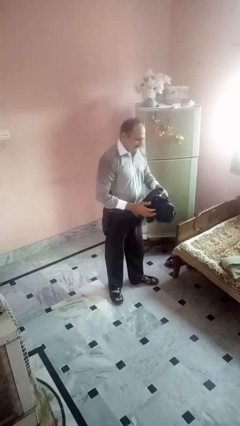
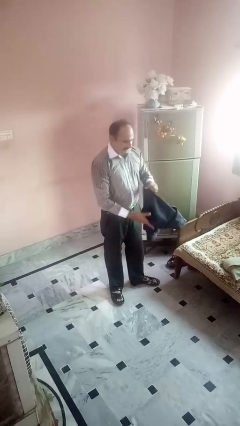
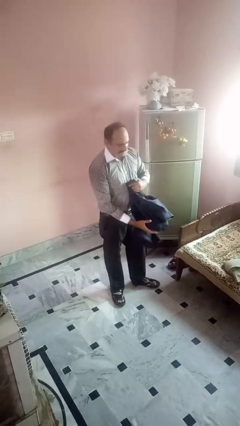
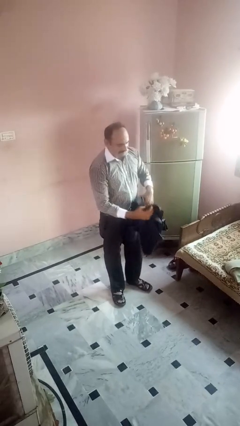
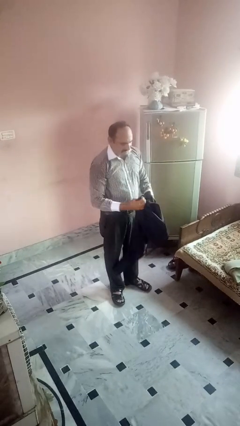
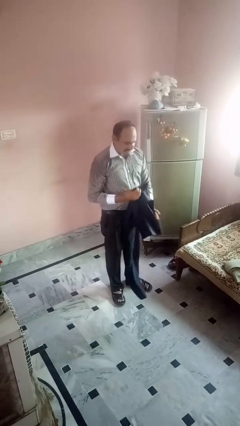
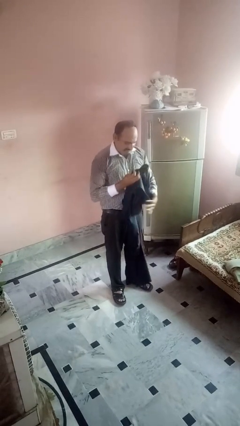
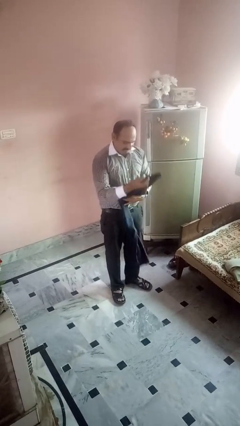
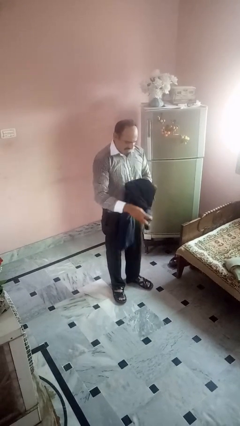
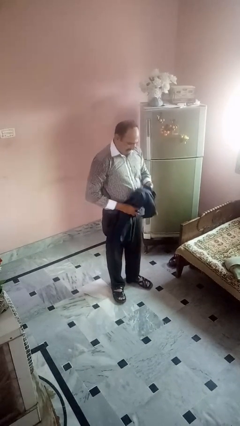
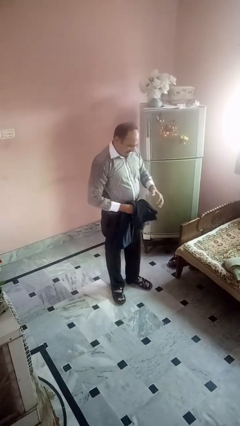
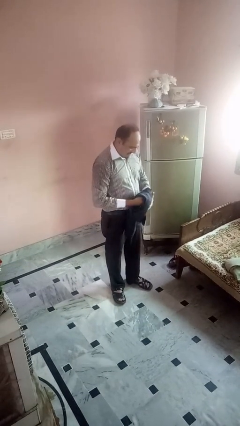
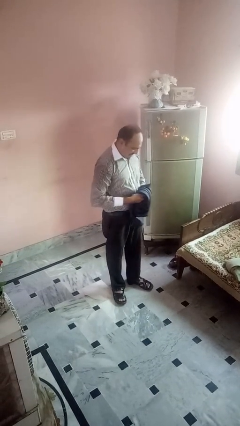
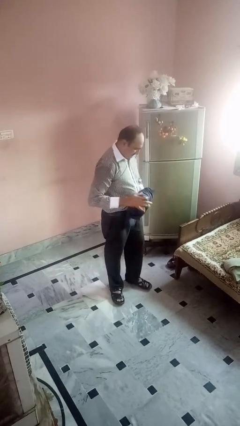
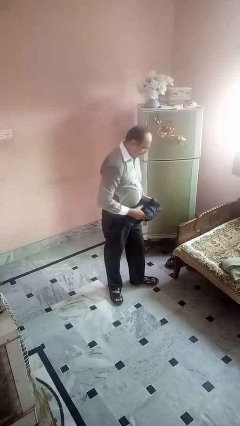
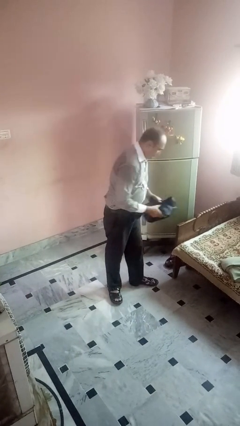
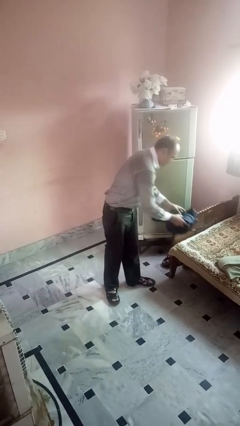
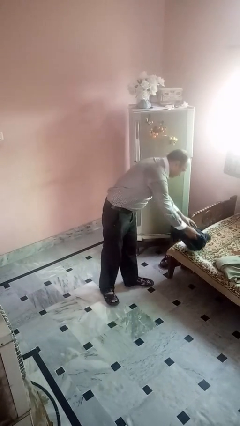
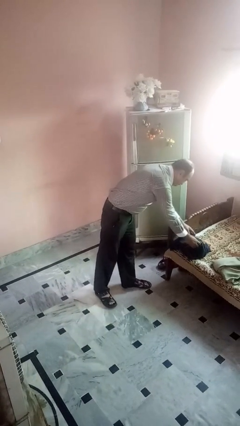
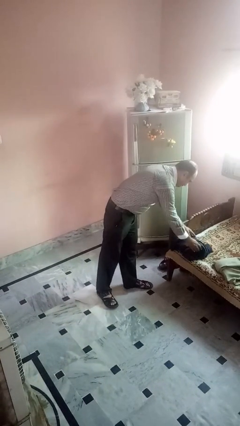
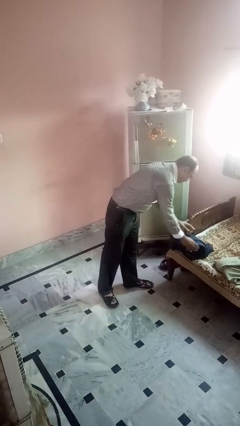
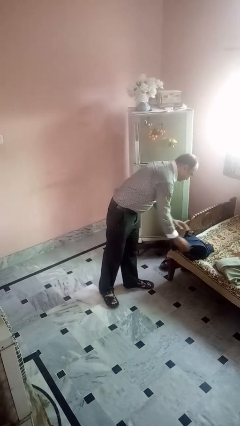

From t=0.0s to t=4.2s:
person folds pants

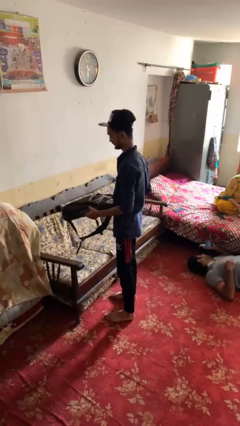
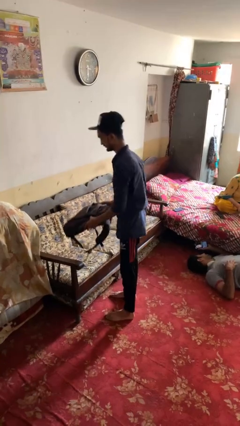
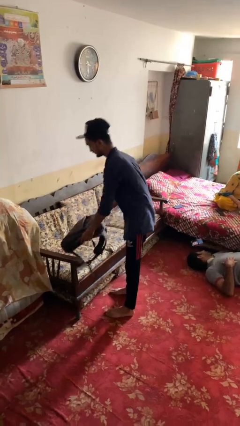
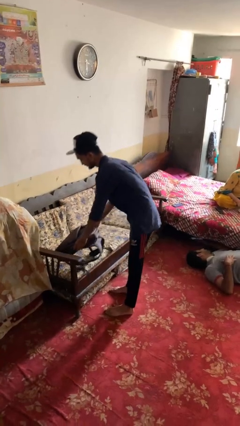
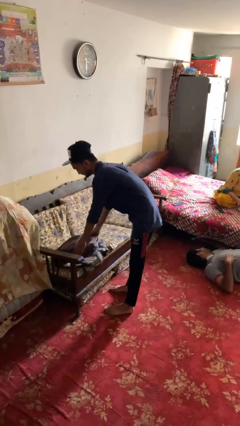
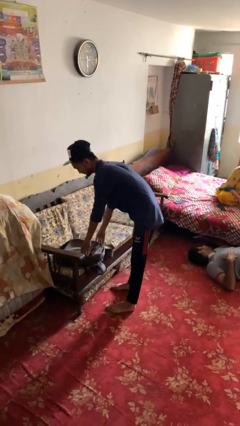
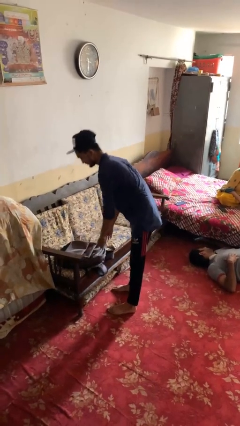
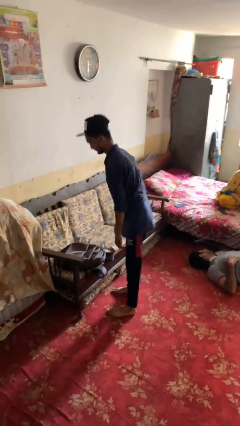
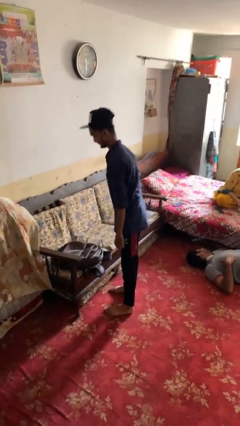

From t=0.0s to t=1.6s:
person puts down object on couch

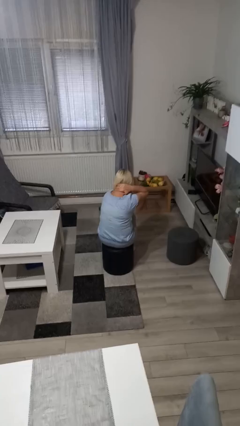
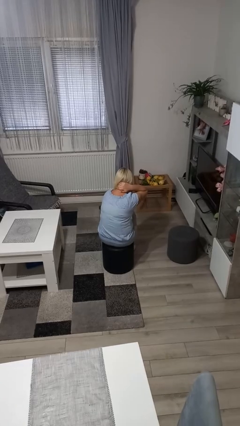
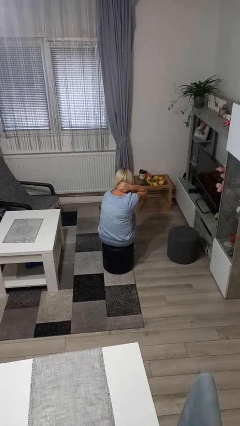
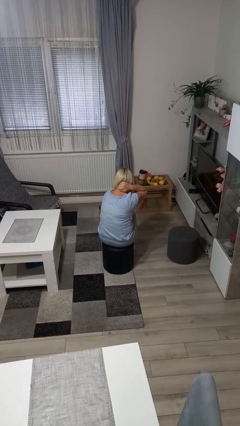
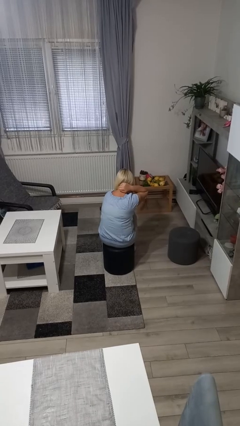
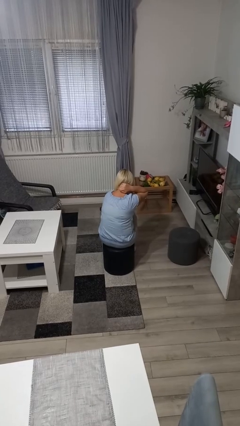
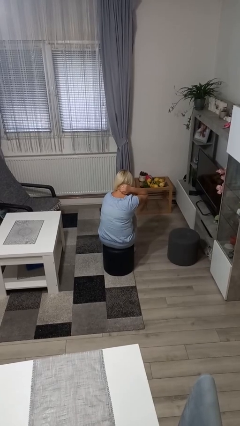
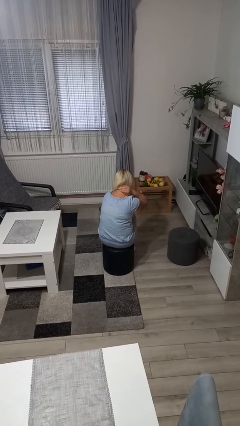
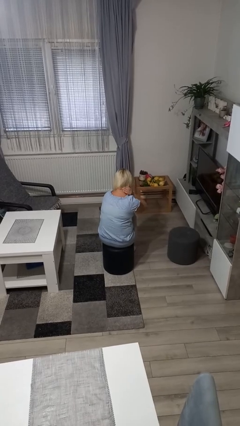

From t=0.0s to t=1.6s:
person rubs neck

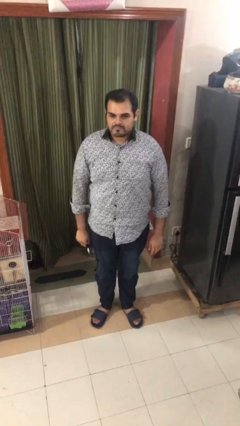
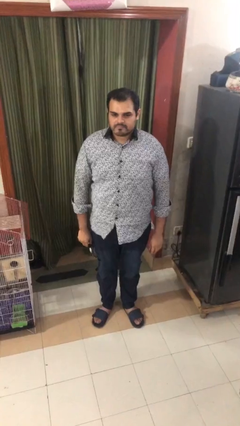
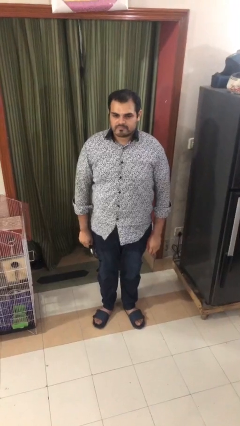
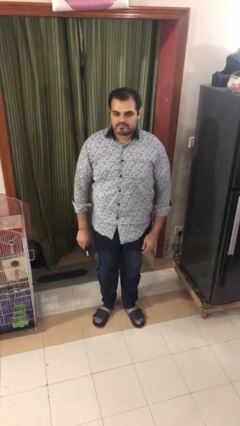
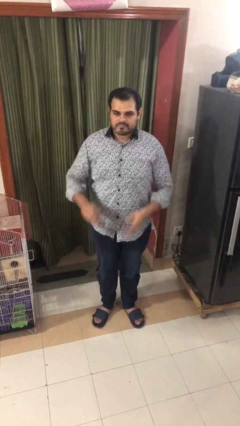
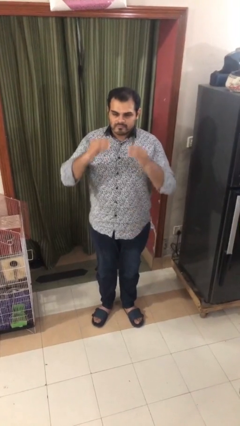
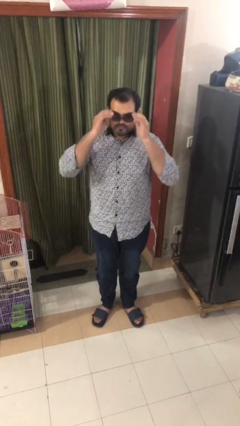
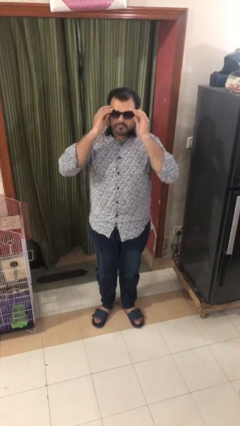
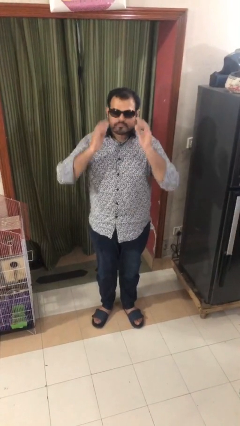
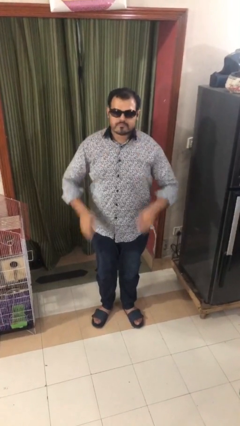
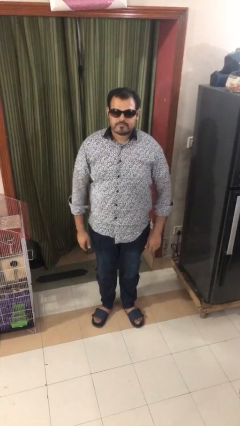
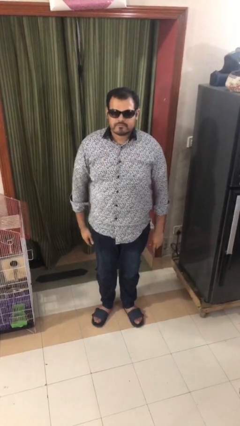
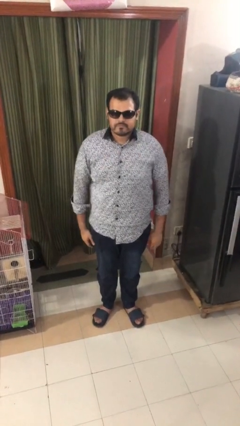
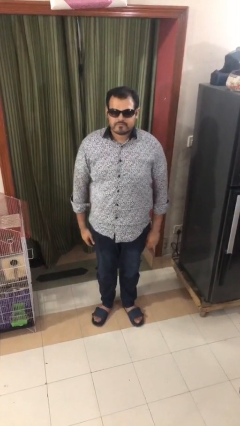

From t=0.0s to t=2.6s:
person puts on sunglasses

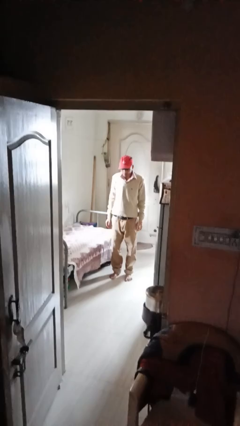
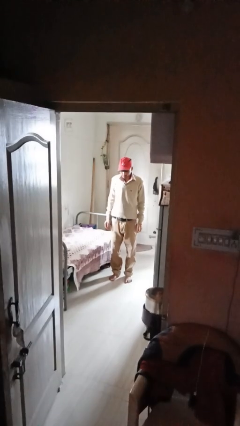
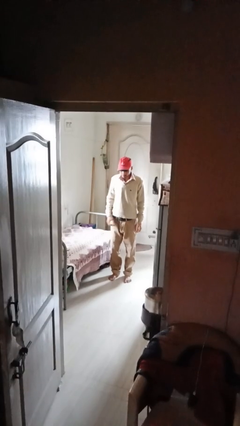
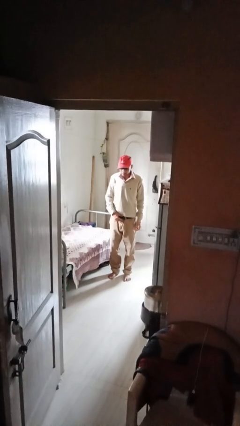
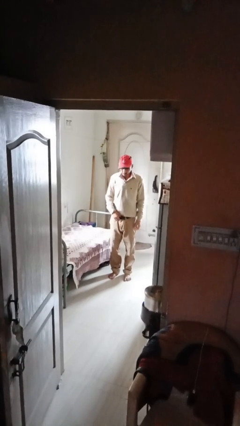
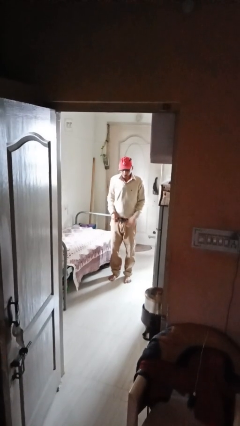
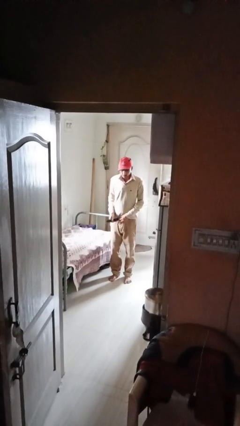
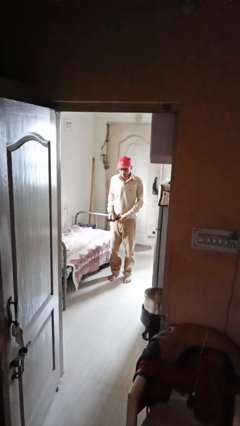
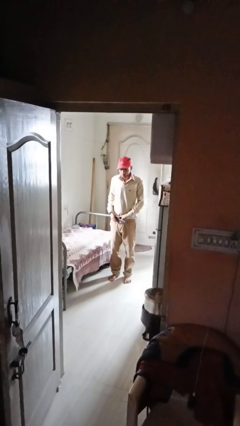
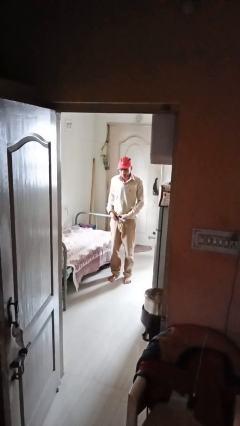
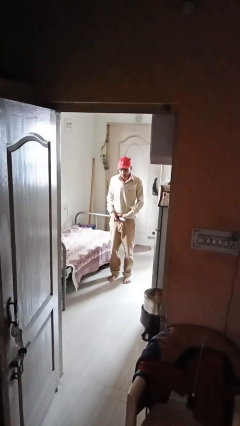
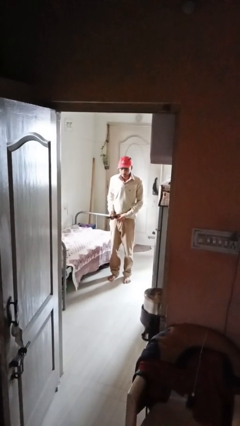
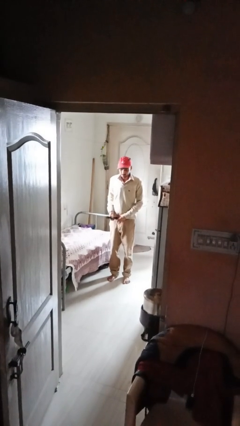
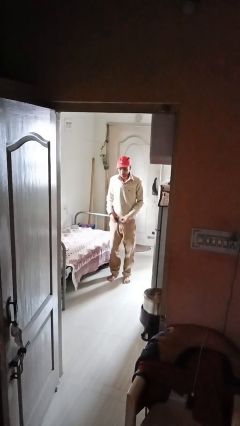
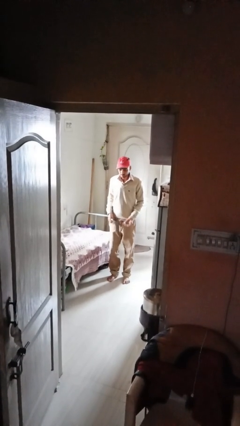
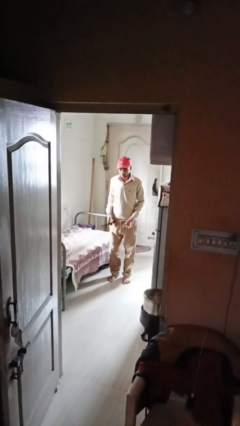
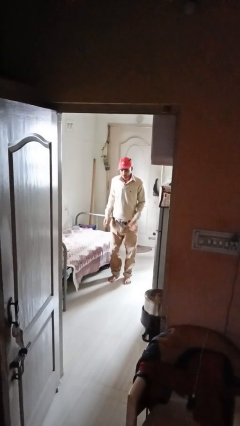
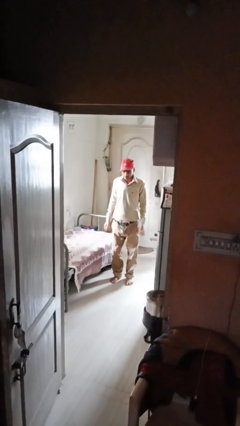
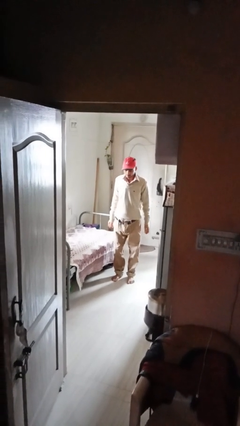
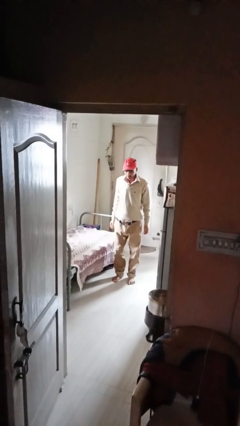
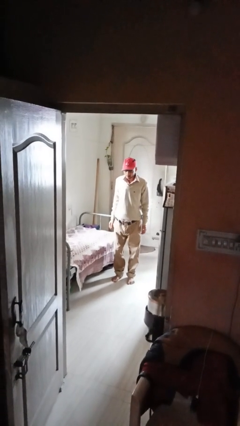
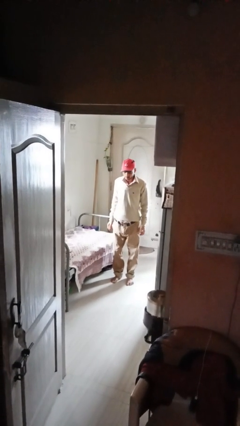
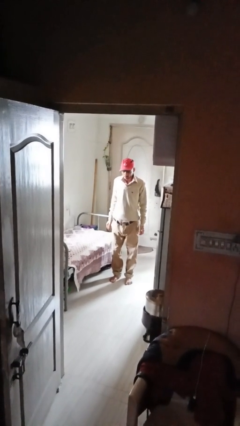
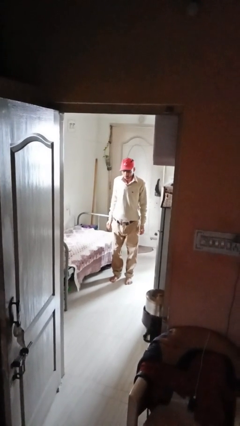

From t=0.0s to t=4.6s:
person takes off belt

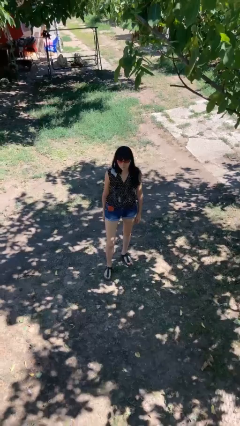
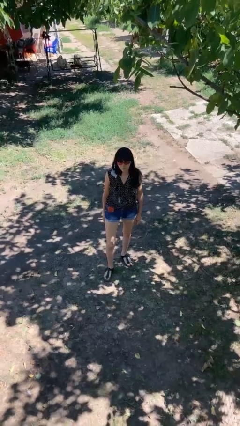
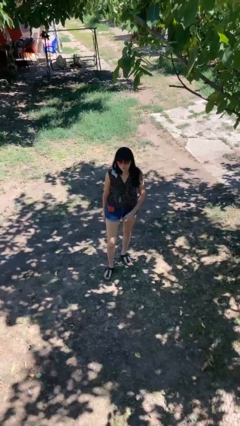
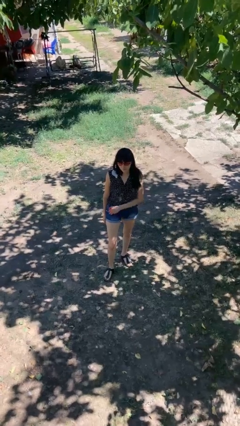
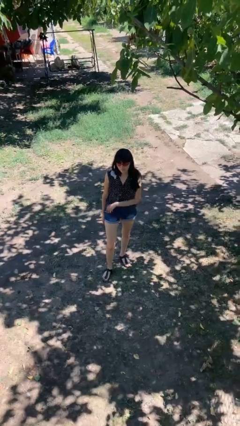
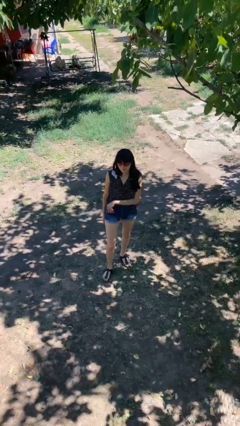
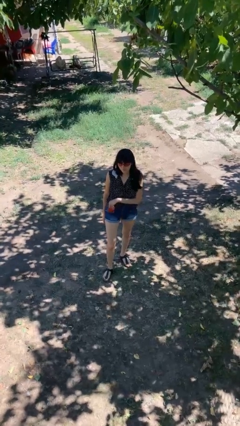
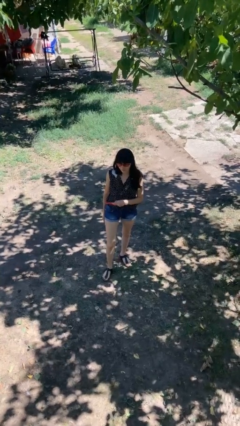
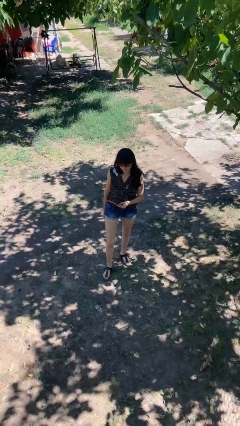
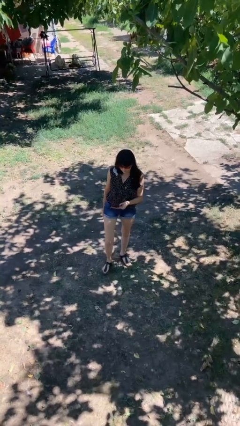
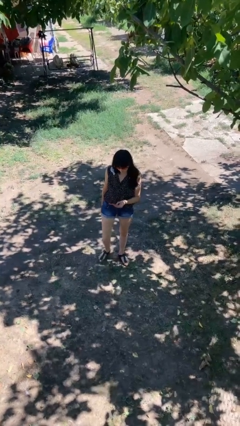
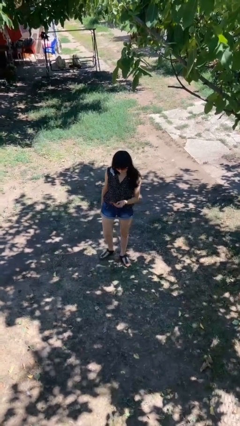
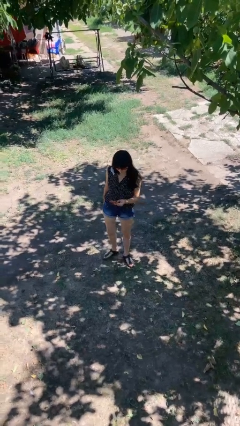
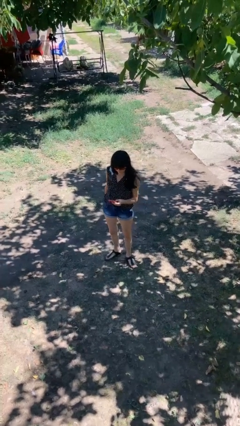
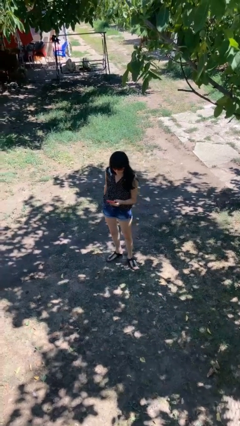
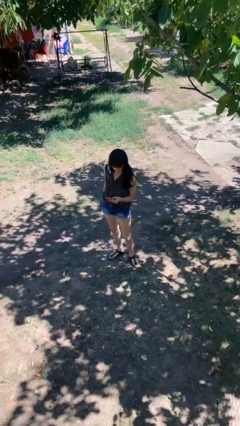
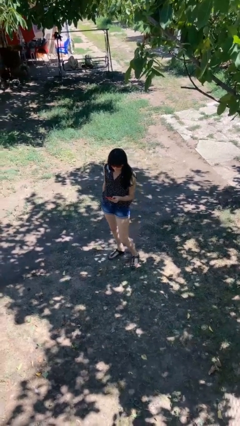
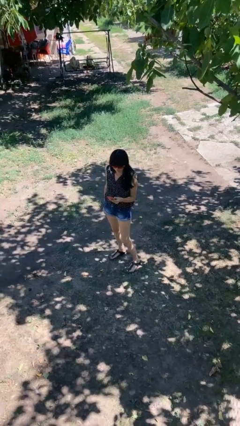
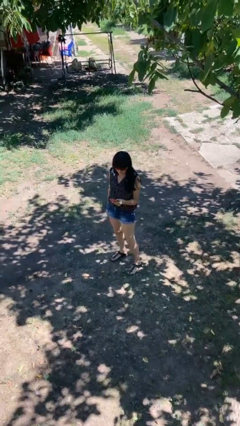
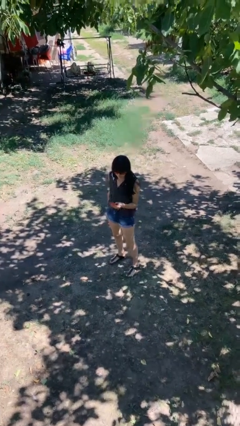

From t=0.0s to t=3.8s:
person takes phone from pocket
